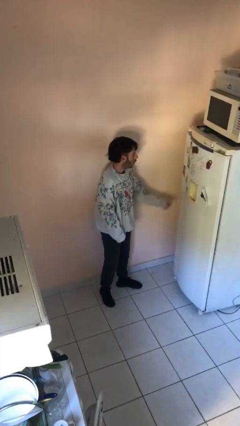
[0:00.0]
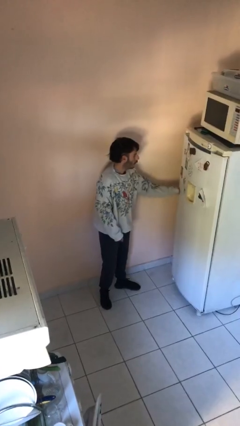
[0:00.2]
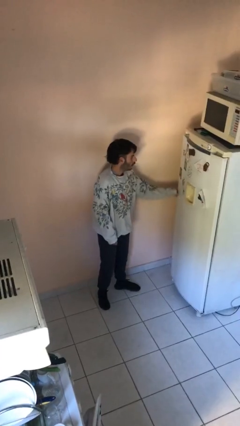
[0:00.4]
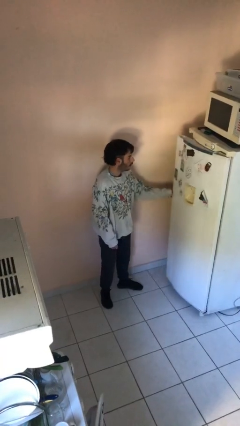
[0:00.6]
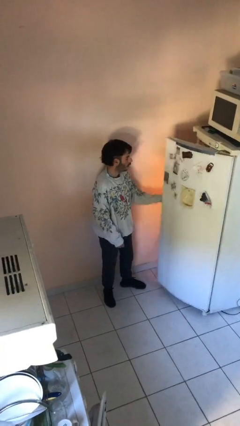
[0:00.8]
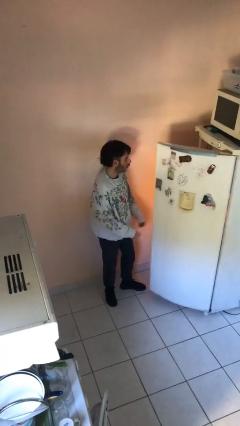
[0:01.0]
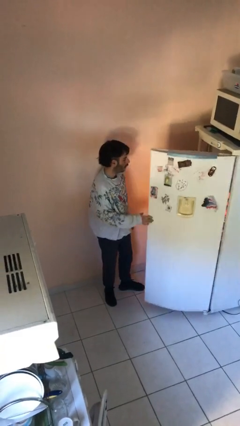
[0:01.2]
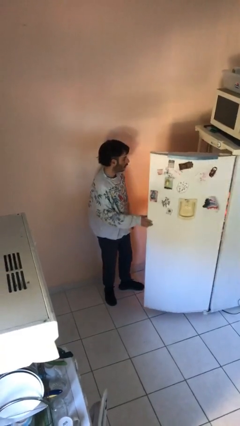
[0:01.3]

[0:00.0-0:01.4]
person opens refrigerator

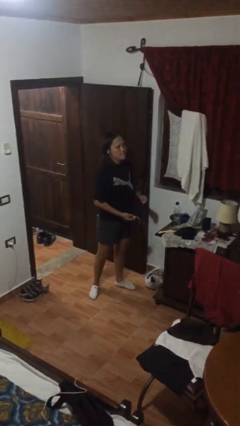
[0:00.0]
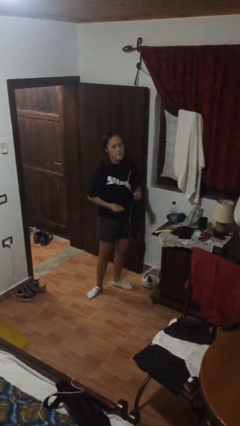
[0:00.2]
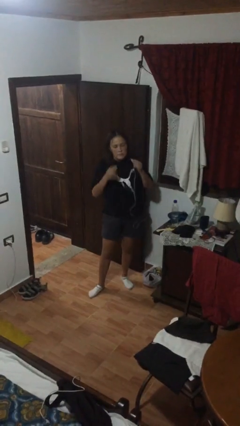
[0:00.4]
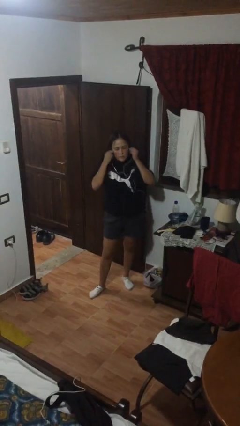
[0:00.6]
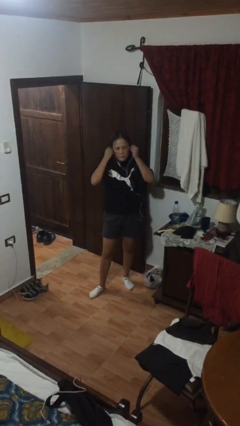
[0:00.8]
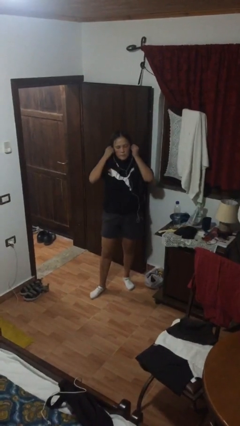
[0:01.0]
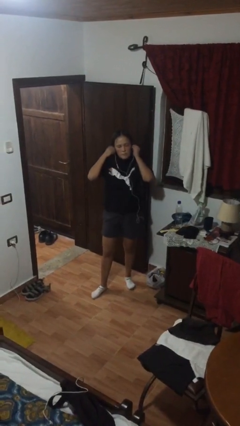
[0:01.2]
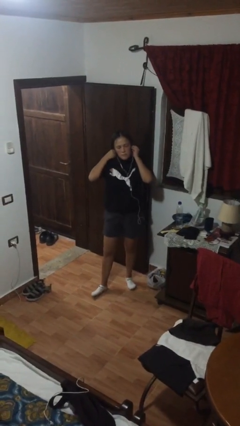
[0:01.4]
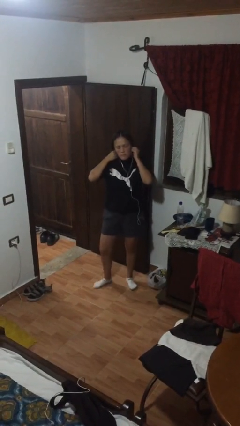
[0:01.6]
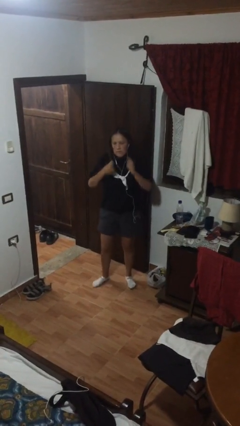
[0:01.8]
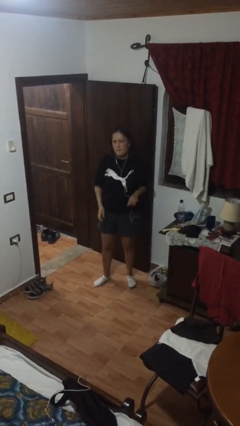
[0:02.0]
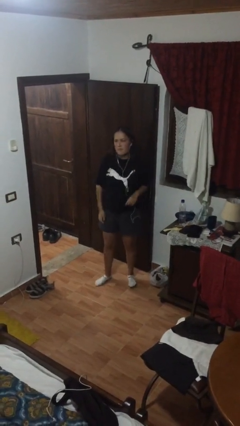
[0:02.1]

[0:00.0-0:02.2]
person puts on headphones

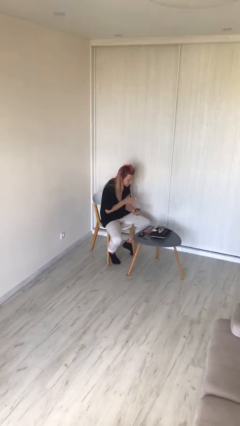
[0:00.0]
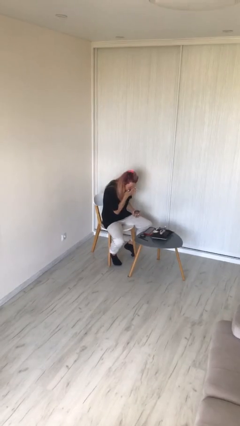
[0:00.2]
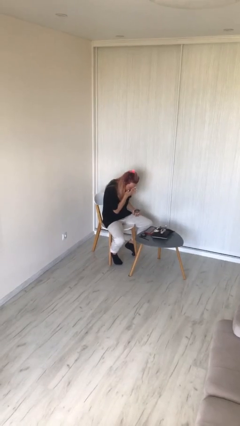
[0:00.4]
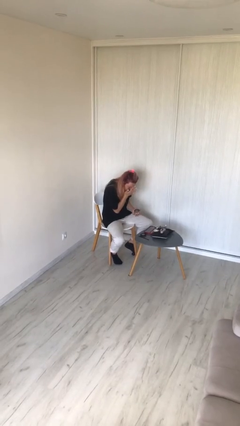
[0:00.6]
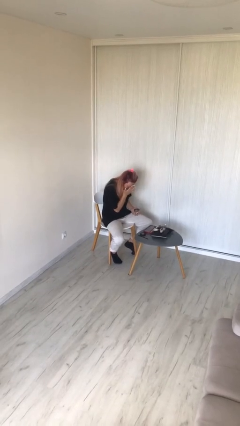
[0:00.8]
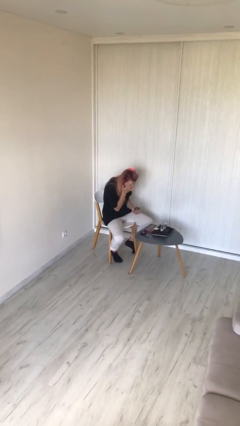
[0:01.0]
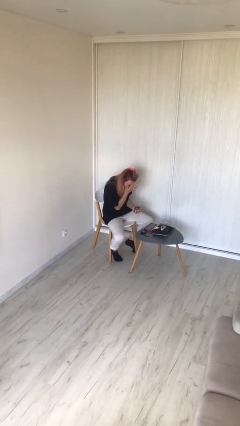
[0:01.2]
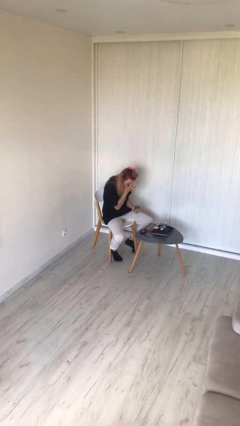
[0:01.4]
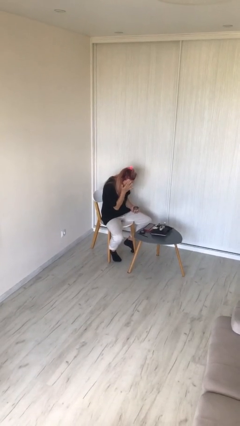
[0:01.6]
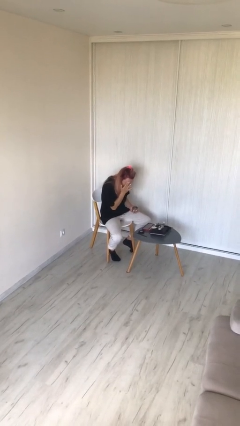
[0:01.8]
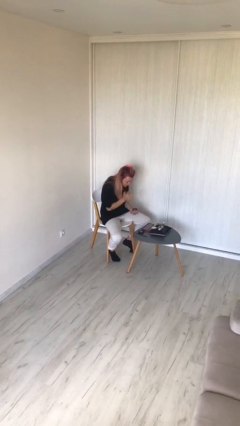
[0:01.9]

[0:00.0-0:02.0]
person applies foundation makeup

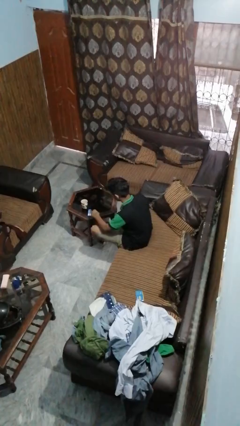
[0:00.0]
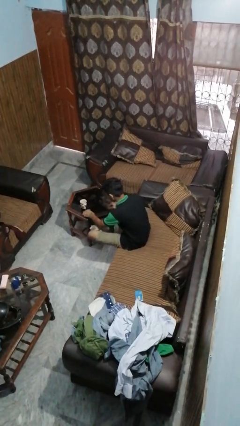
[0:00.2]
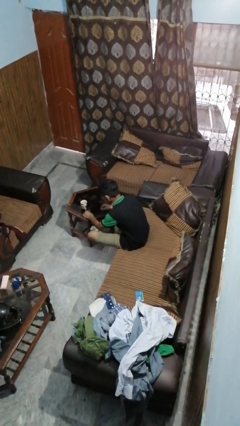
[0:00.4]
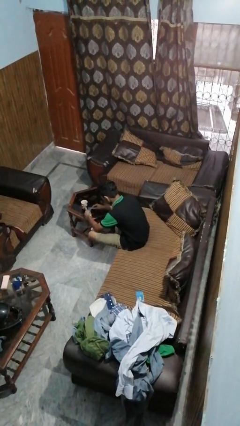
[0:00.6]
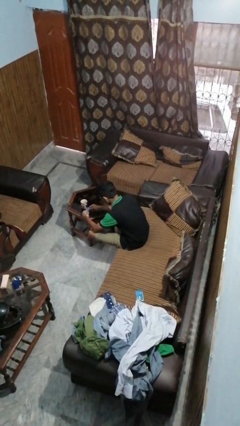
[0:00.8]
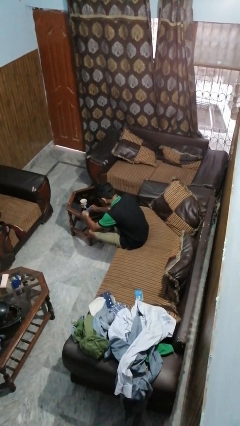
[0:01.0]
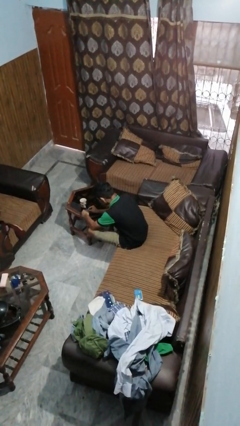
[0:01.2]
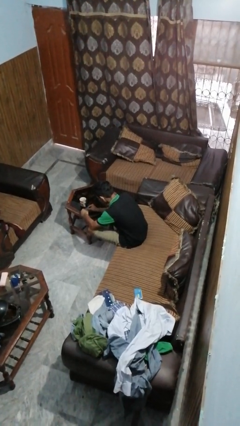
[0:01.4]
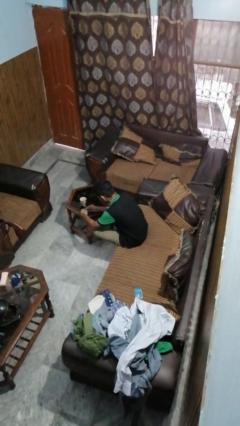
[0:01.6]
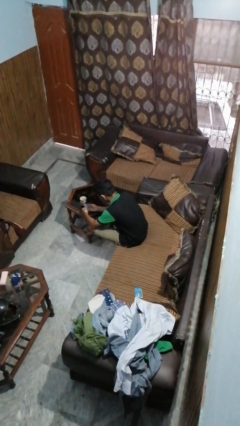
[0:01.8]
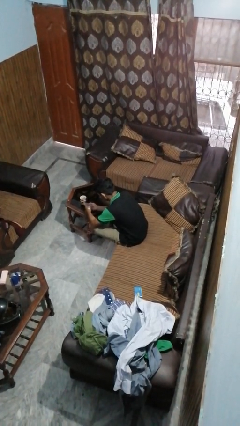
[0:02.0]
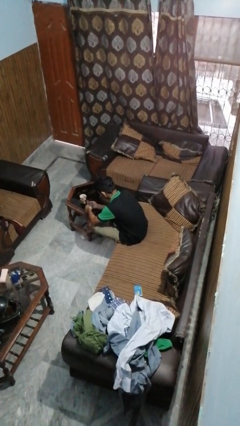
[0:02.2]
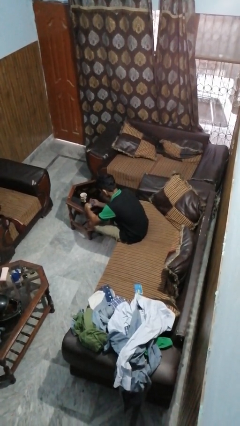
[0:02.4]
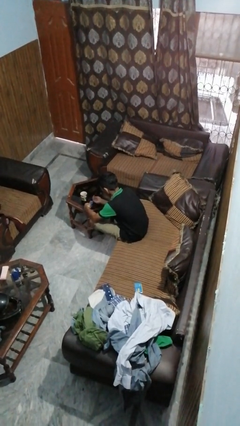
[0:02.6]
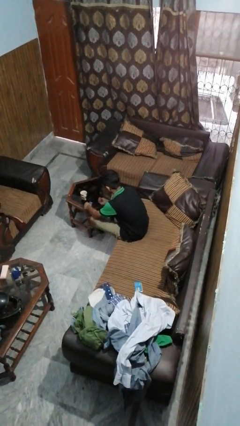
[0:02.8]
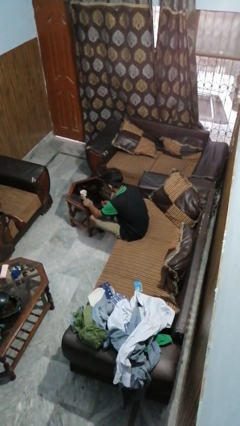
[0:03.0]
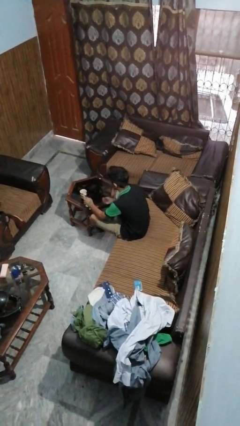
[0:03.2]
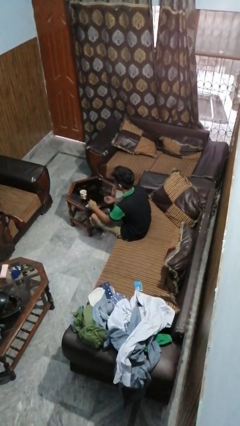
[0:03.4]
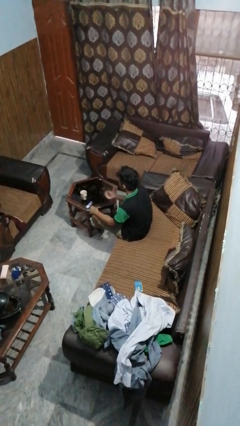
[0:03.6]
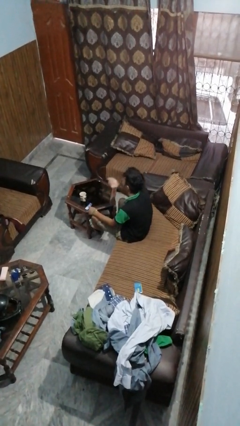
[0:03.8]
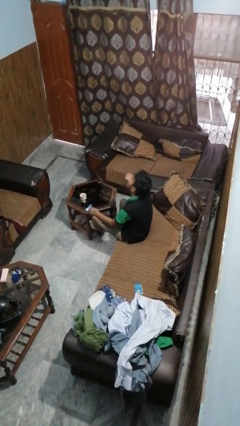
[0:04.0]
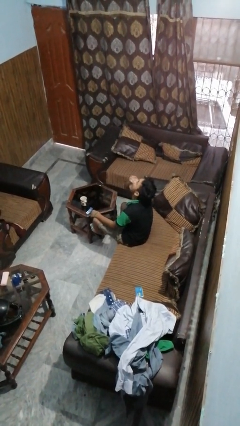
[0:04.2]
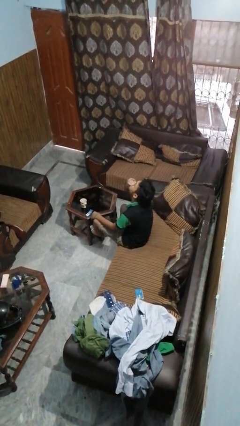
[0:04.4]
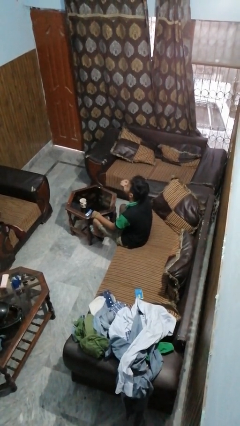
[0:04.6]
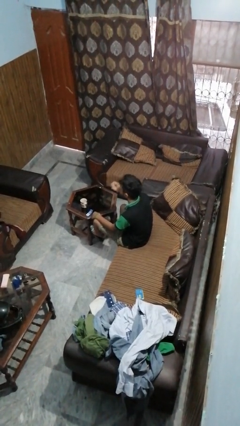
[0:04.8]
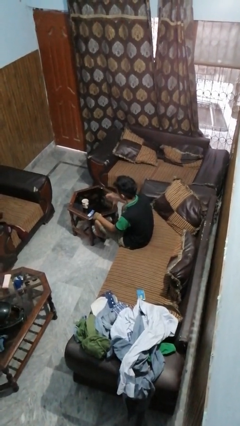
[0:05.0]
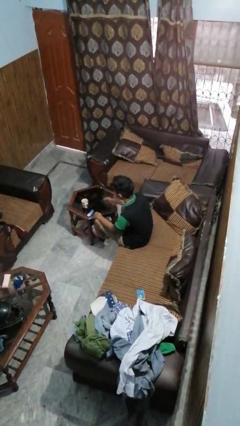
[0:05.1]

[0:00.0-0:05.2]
person takes medicine pills

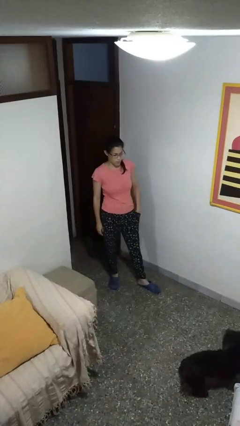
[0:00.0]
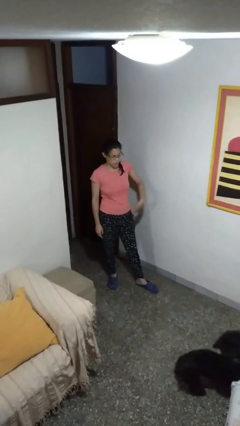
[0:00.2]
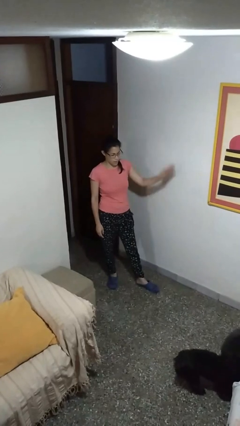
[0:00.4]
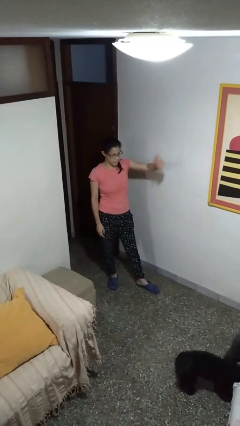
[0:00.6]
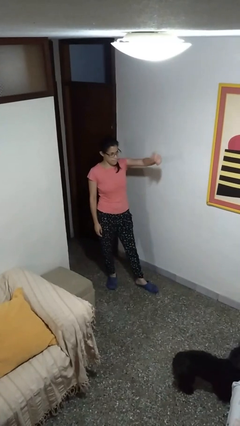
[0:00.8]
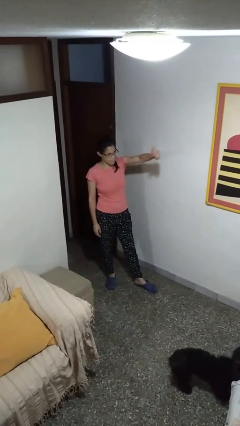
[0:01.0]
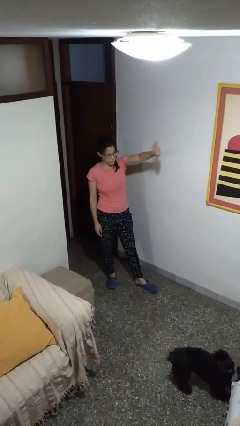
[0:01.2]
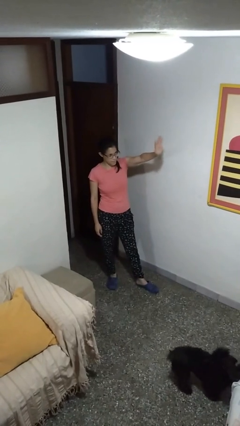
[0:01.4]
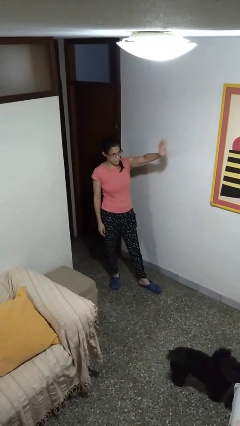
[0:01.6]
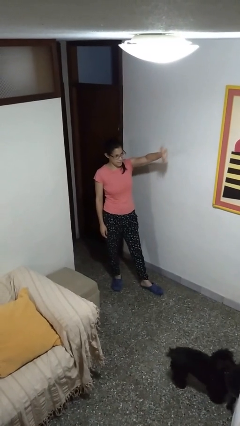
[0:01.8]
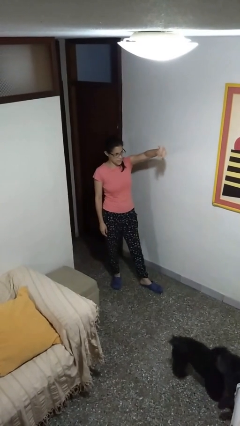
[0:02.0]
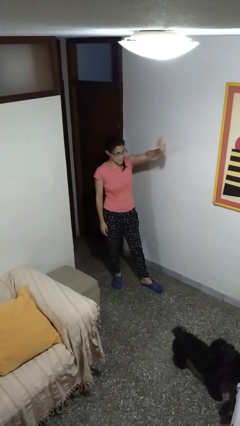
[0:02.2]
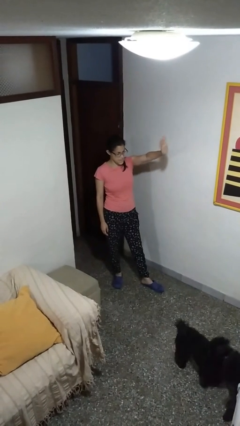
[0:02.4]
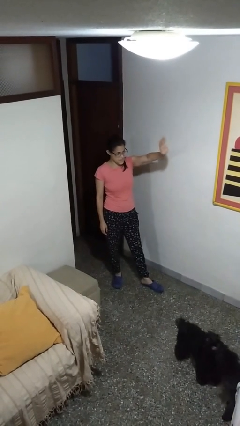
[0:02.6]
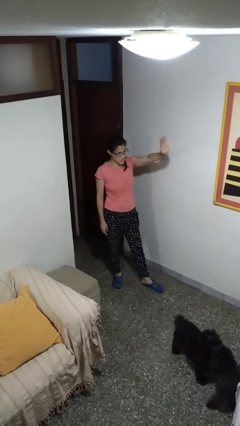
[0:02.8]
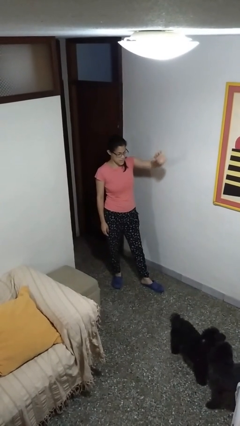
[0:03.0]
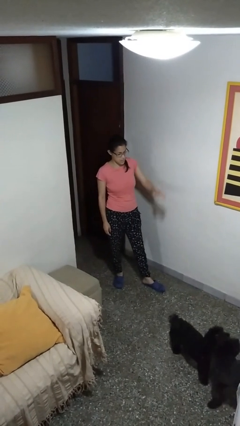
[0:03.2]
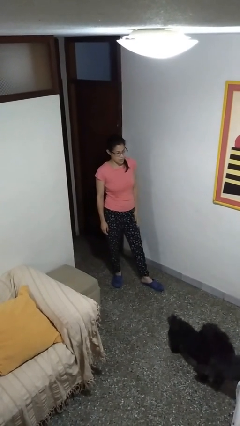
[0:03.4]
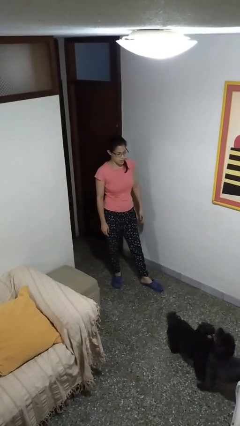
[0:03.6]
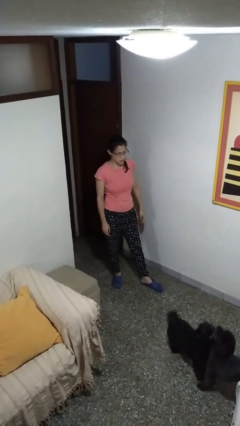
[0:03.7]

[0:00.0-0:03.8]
person waves at person

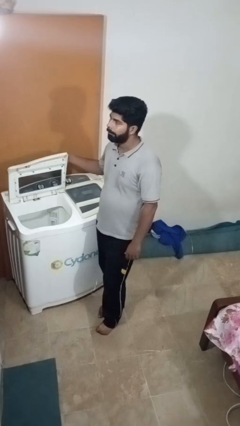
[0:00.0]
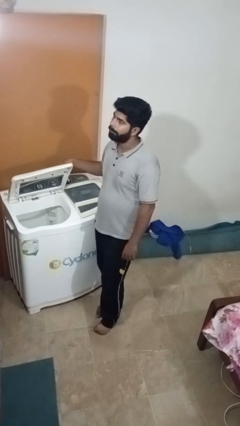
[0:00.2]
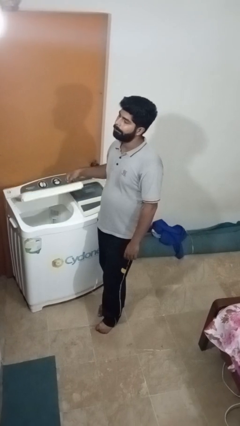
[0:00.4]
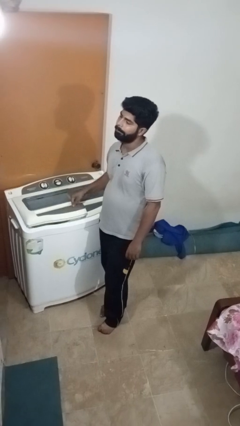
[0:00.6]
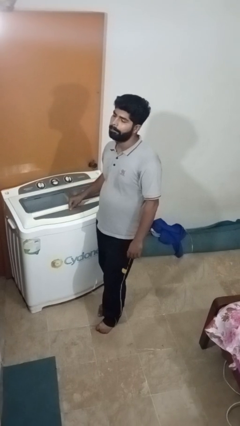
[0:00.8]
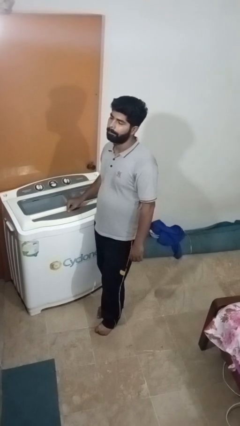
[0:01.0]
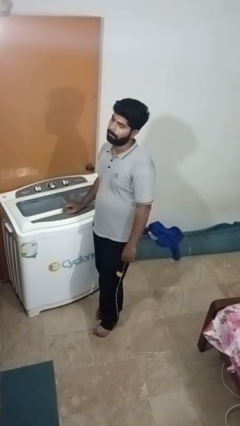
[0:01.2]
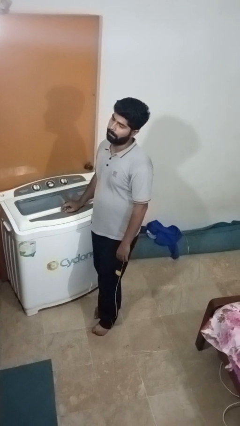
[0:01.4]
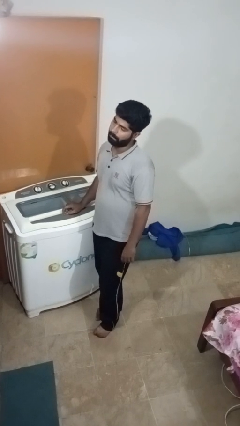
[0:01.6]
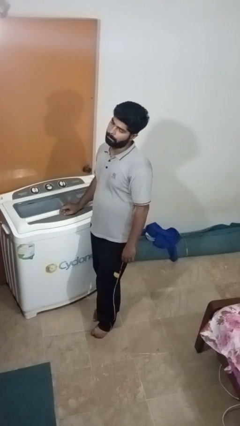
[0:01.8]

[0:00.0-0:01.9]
person closes clothes washer

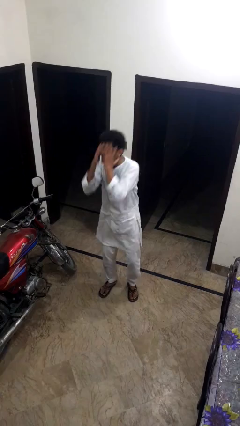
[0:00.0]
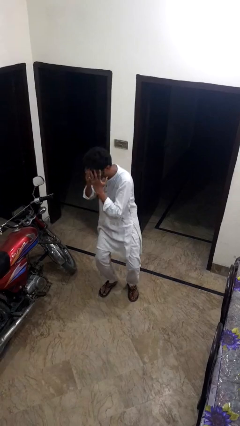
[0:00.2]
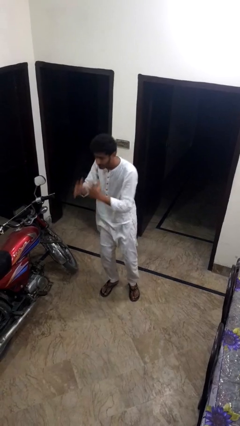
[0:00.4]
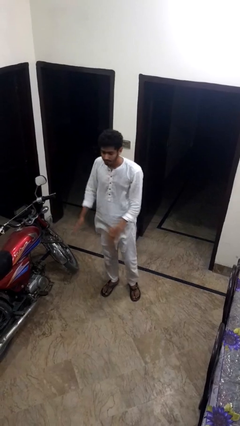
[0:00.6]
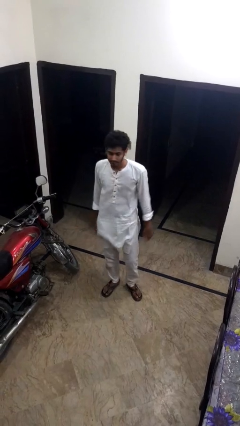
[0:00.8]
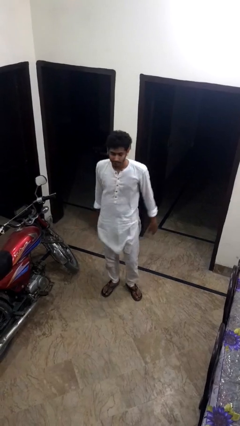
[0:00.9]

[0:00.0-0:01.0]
person sneezes into hand
